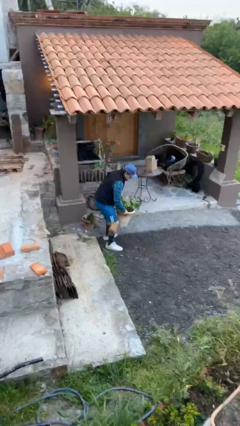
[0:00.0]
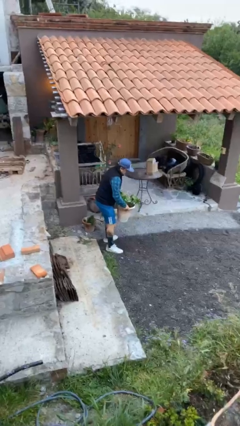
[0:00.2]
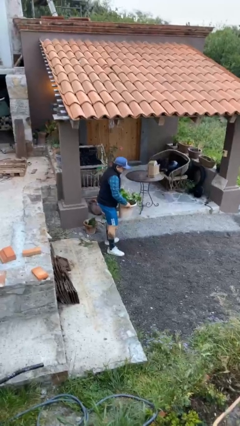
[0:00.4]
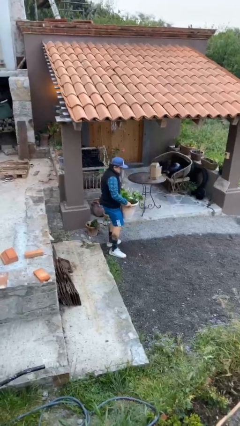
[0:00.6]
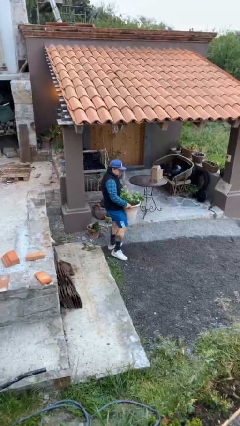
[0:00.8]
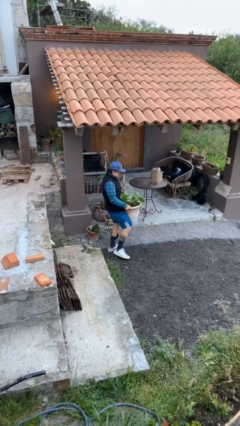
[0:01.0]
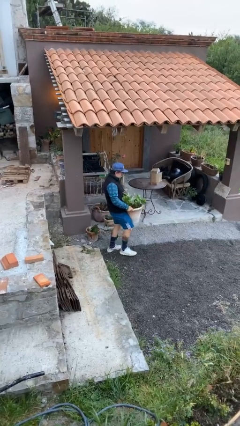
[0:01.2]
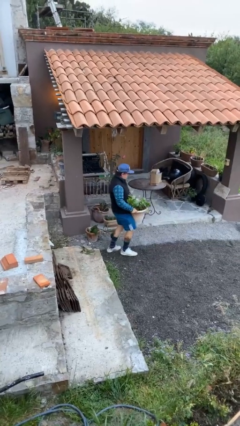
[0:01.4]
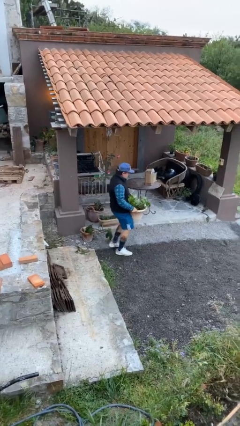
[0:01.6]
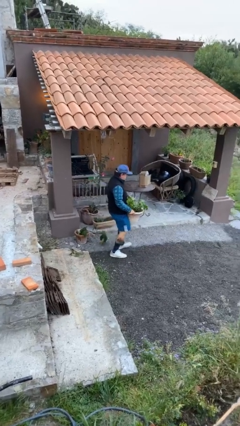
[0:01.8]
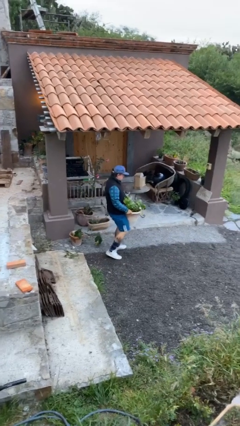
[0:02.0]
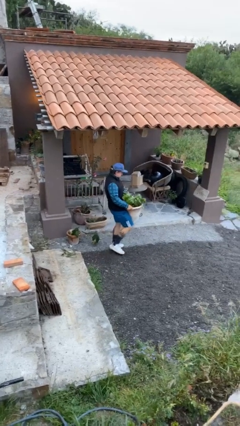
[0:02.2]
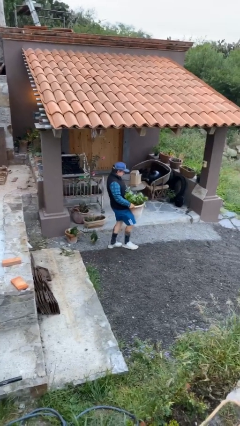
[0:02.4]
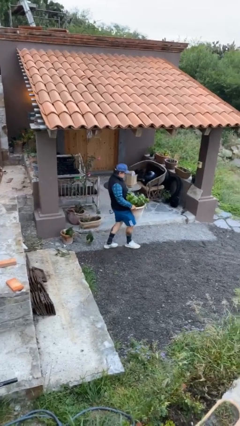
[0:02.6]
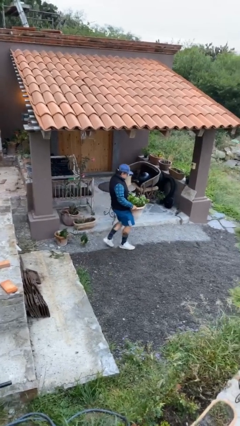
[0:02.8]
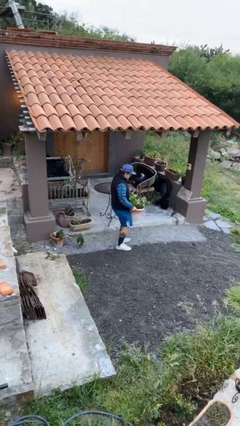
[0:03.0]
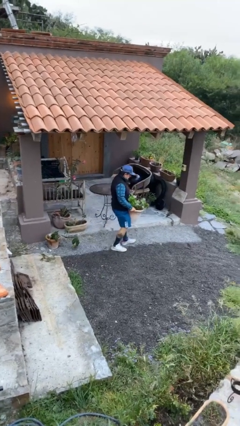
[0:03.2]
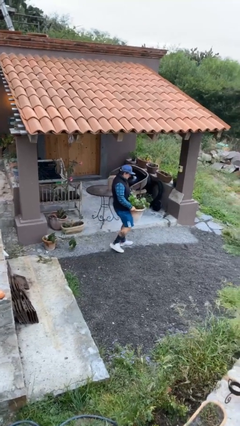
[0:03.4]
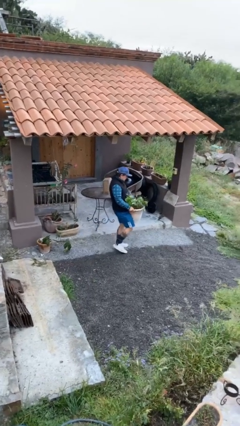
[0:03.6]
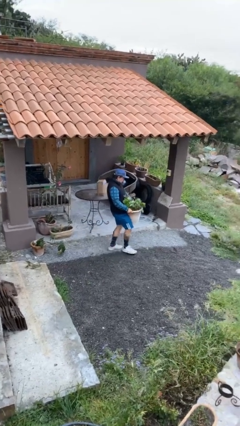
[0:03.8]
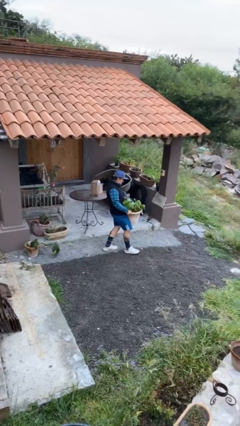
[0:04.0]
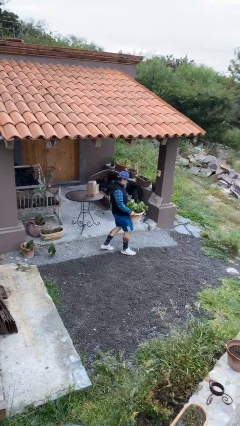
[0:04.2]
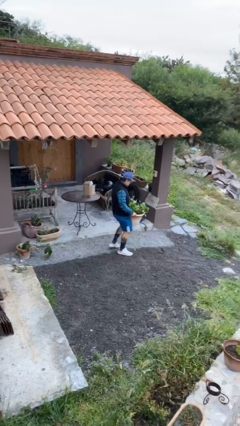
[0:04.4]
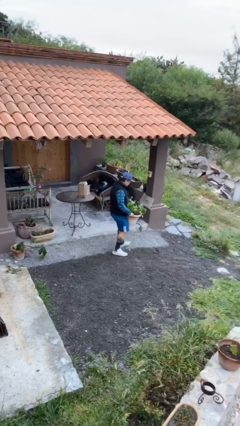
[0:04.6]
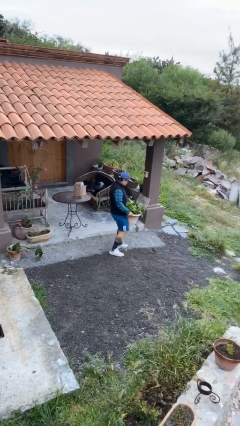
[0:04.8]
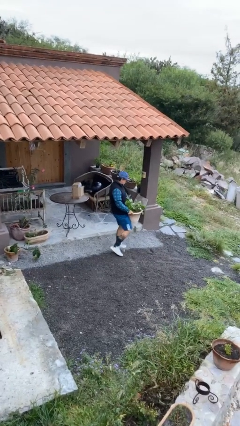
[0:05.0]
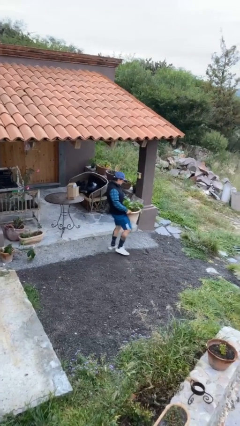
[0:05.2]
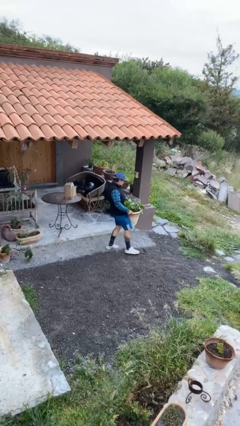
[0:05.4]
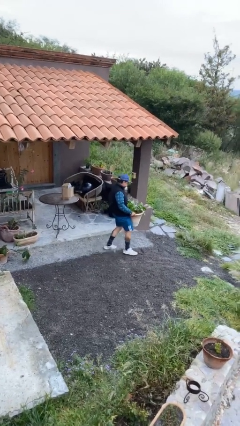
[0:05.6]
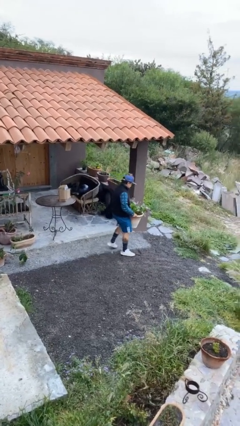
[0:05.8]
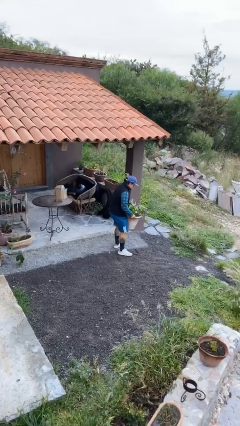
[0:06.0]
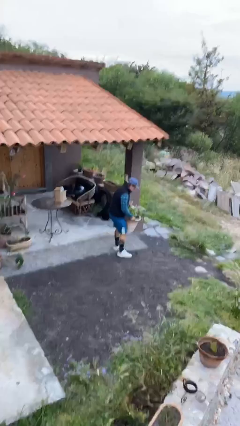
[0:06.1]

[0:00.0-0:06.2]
person carries heavy object

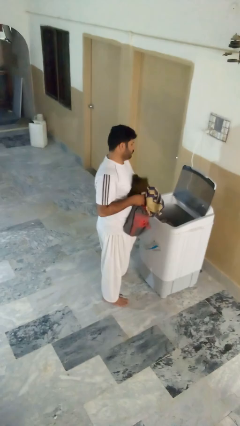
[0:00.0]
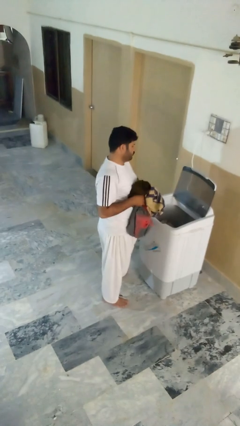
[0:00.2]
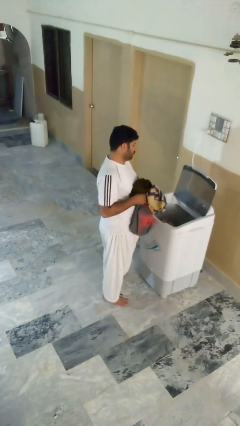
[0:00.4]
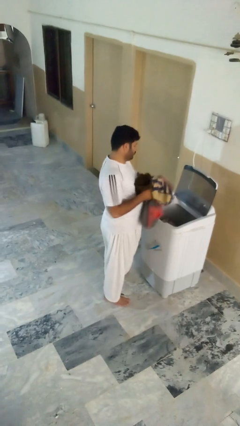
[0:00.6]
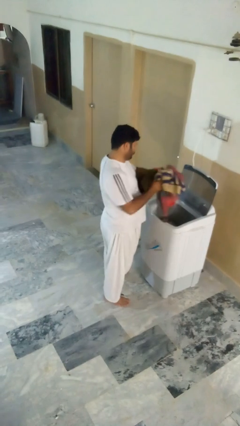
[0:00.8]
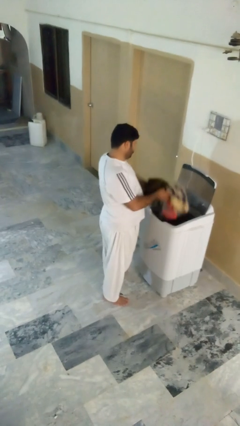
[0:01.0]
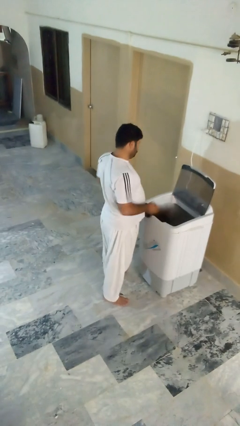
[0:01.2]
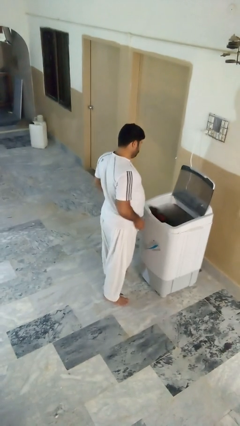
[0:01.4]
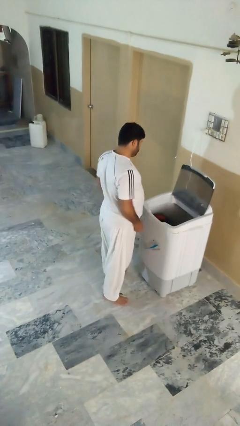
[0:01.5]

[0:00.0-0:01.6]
person loads clotheswasher

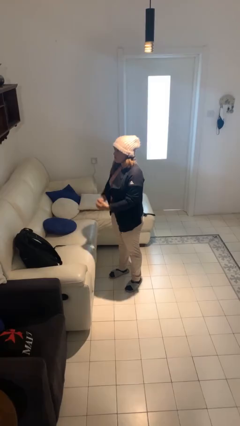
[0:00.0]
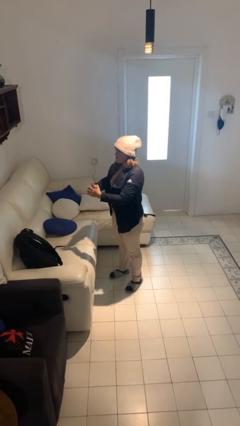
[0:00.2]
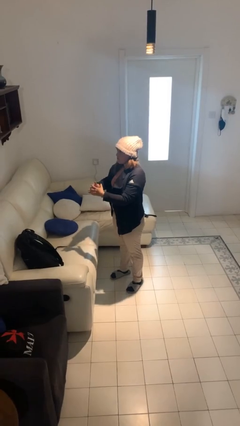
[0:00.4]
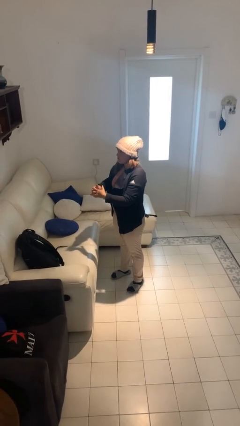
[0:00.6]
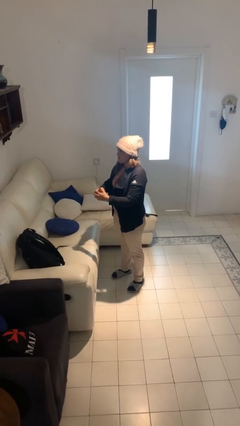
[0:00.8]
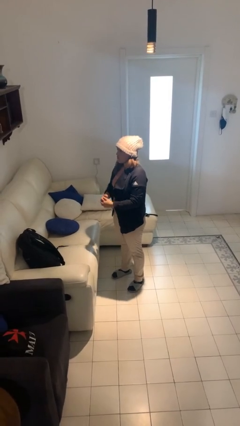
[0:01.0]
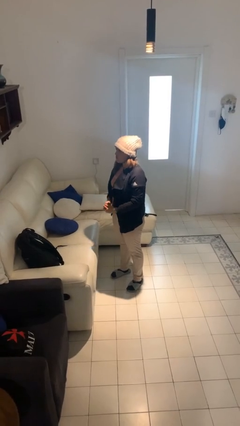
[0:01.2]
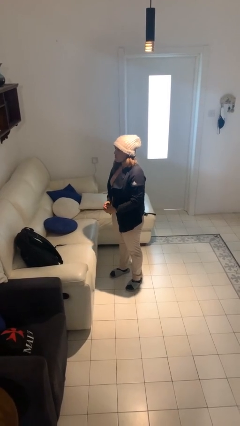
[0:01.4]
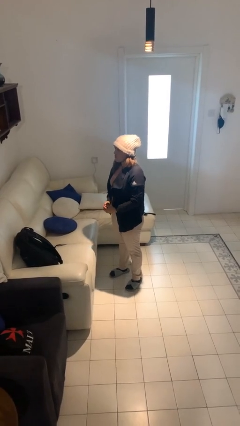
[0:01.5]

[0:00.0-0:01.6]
person cracks knuckles

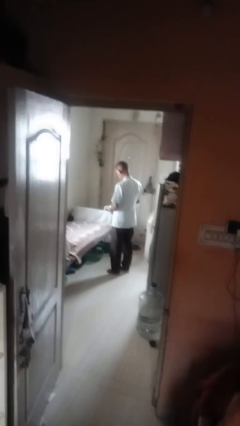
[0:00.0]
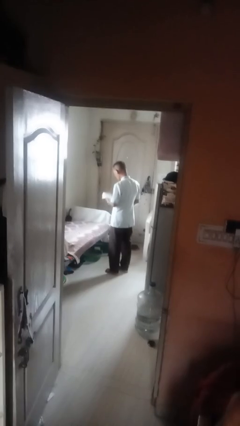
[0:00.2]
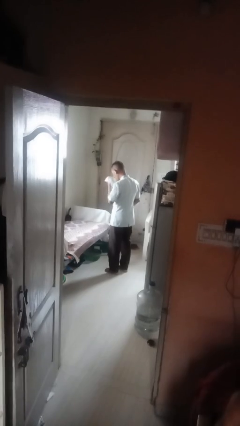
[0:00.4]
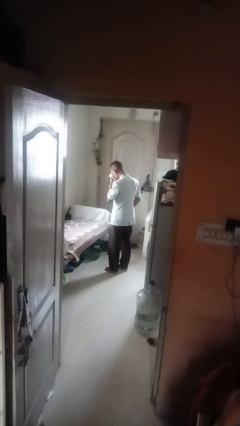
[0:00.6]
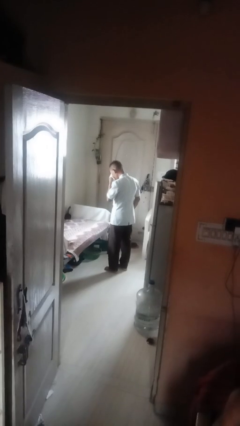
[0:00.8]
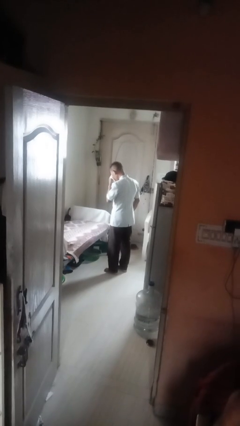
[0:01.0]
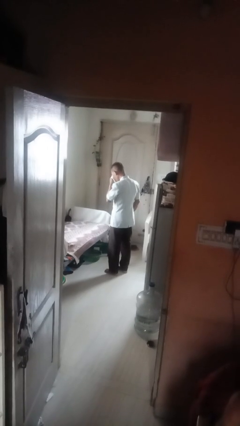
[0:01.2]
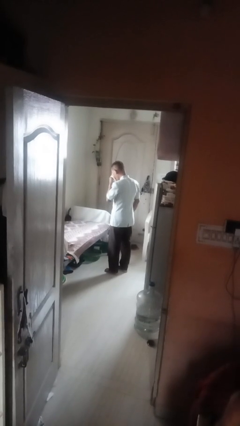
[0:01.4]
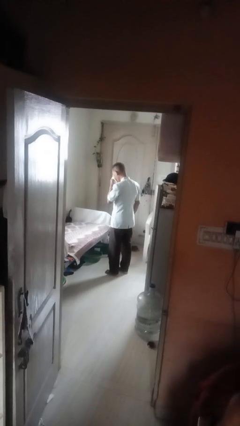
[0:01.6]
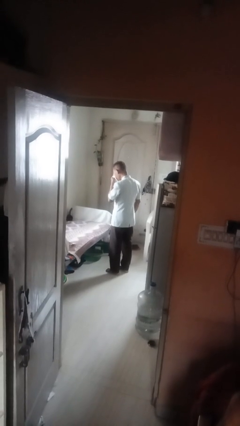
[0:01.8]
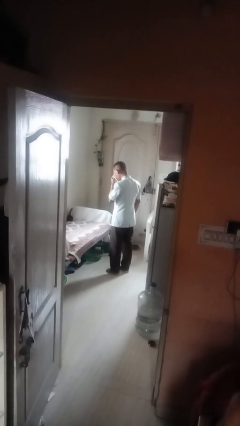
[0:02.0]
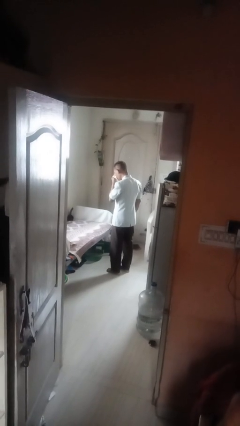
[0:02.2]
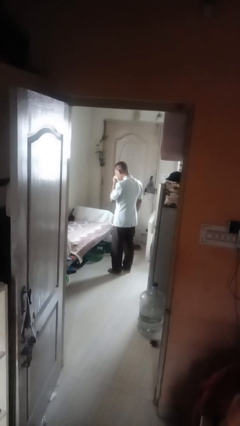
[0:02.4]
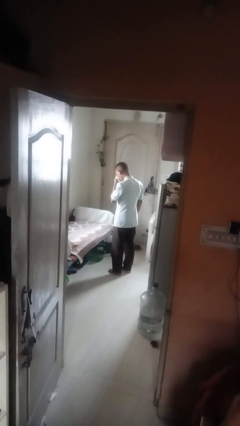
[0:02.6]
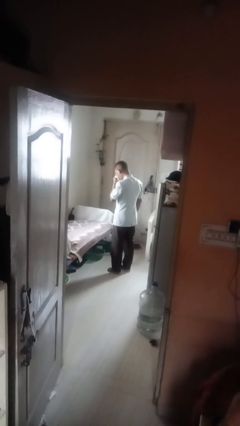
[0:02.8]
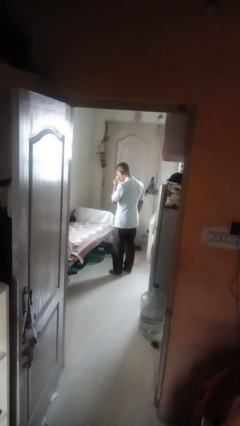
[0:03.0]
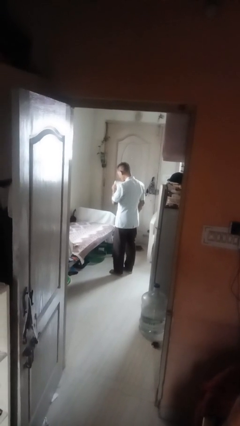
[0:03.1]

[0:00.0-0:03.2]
person blows nose

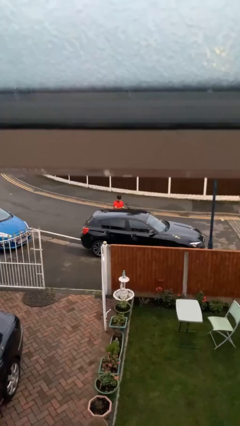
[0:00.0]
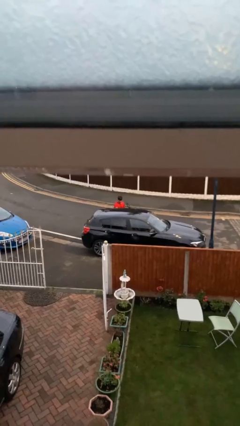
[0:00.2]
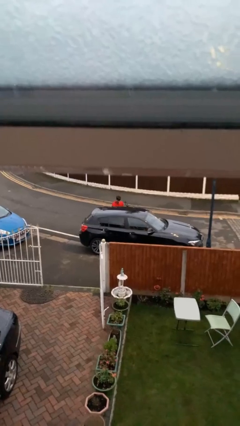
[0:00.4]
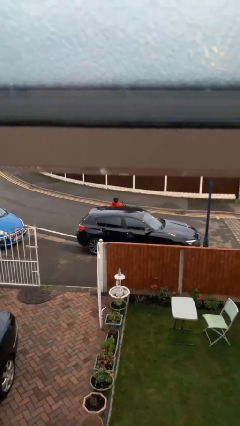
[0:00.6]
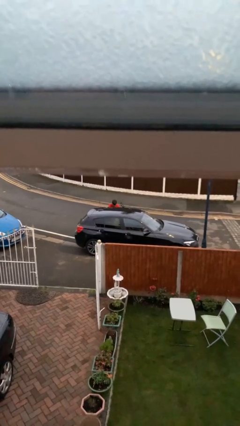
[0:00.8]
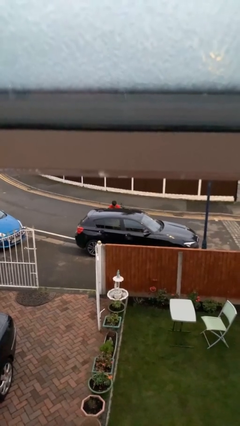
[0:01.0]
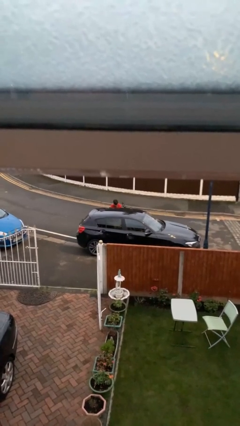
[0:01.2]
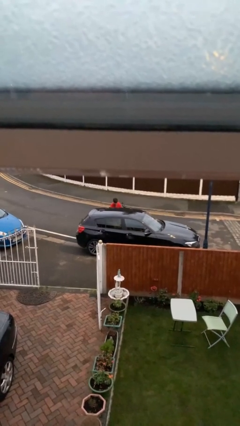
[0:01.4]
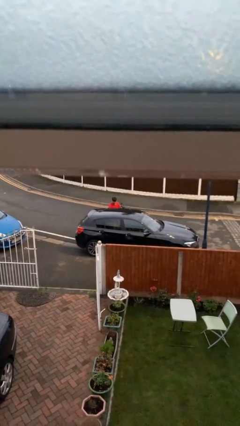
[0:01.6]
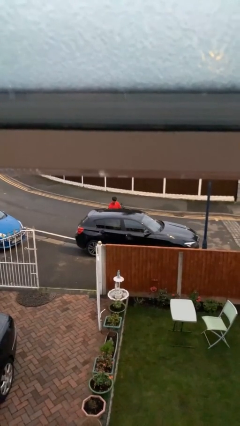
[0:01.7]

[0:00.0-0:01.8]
person loads car

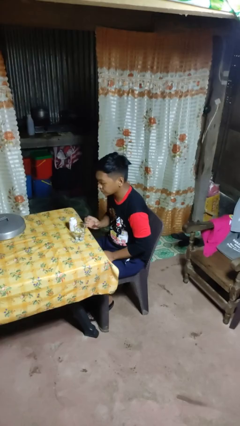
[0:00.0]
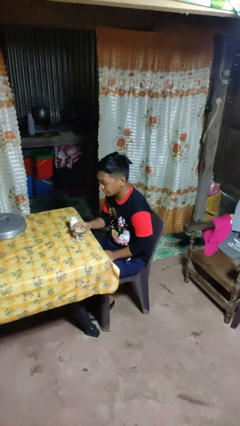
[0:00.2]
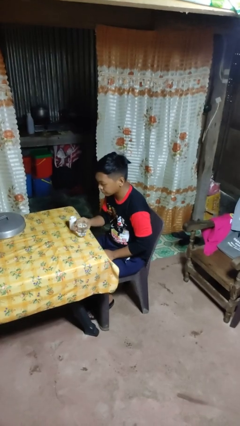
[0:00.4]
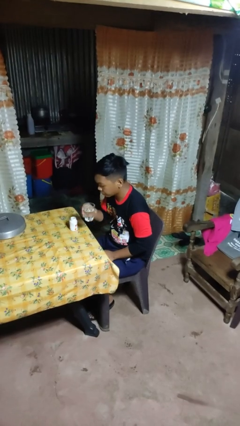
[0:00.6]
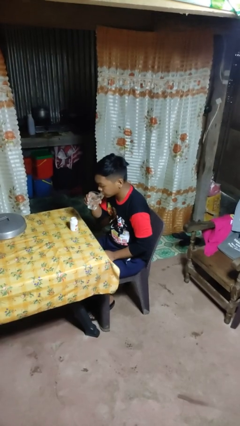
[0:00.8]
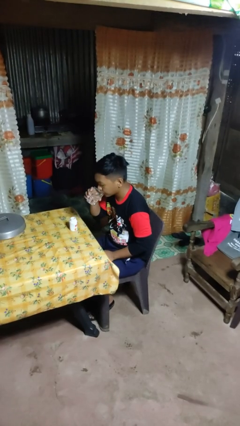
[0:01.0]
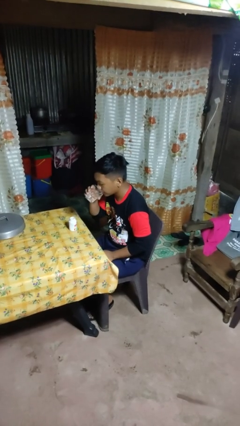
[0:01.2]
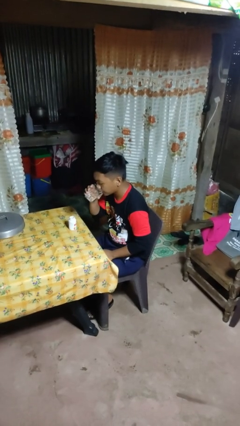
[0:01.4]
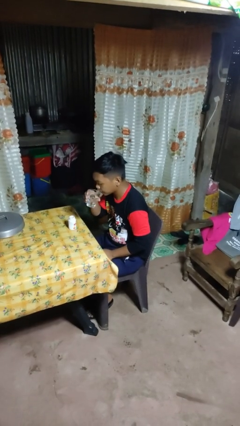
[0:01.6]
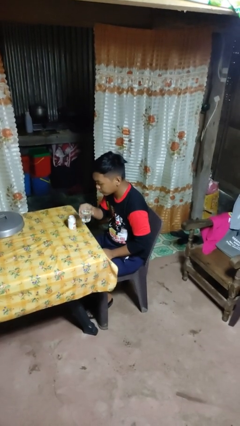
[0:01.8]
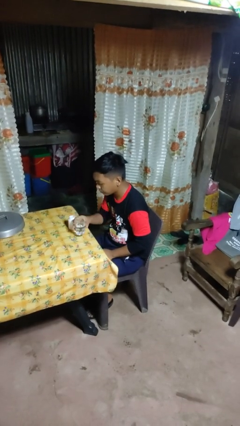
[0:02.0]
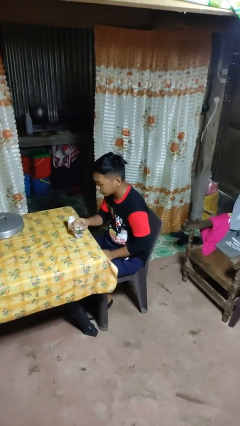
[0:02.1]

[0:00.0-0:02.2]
person drinks from cup

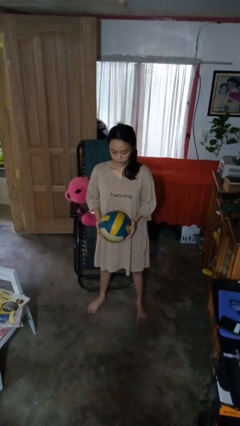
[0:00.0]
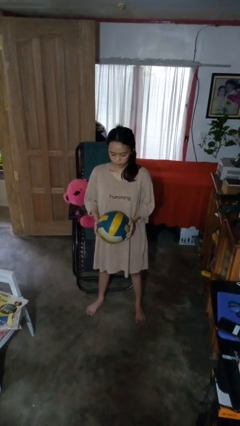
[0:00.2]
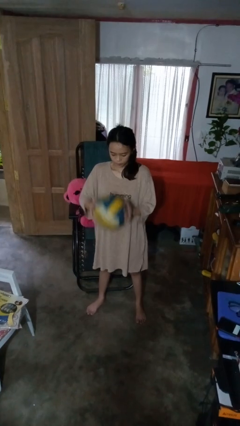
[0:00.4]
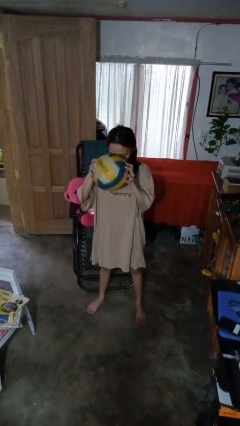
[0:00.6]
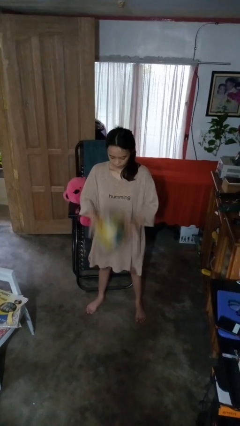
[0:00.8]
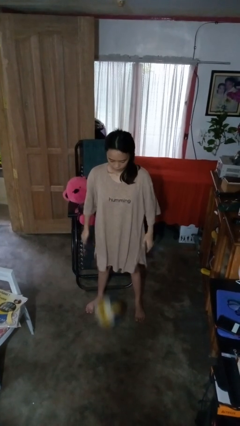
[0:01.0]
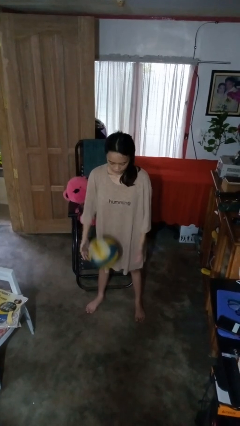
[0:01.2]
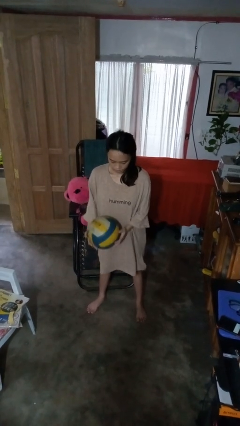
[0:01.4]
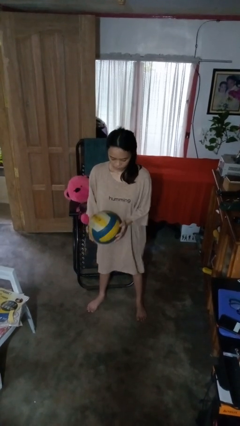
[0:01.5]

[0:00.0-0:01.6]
person bounces ball on floor
